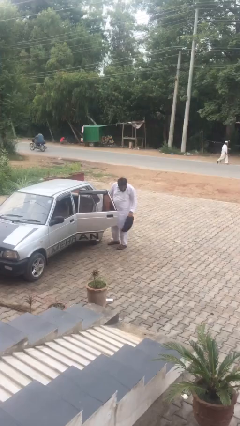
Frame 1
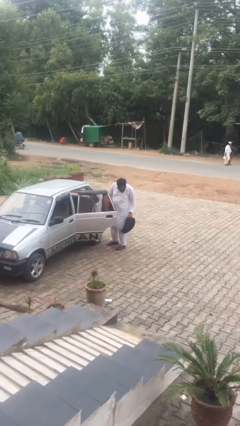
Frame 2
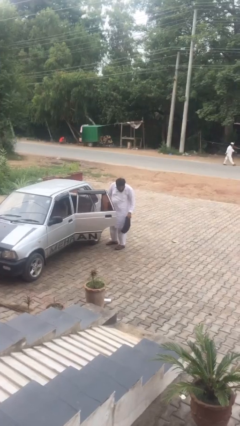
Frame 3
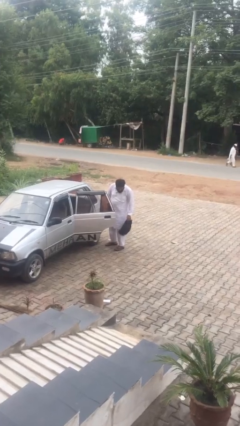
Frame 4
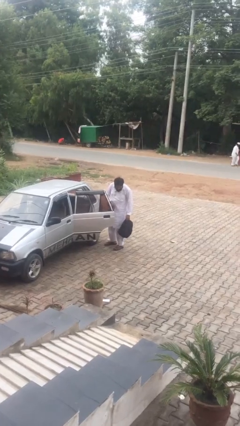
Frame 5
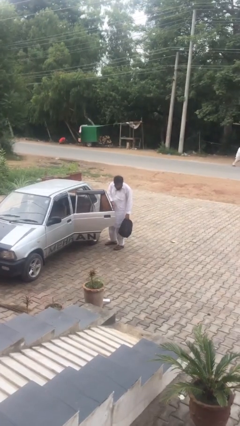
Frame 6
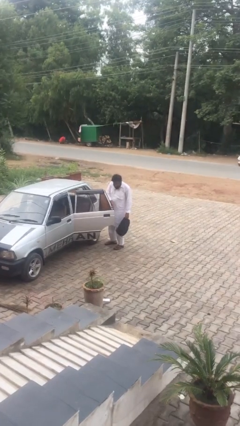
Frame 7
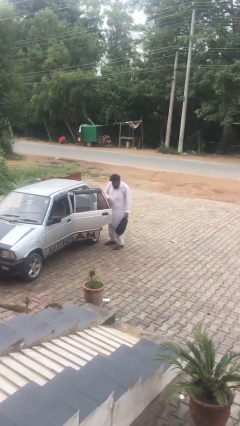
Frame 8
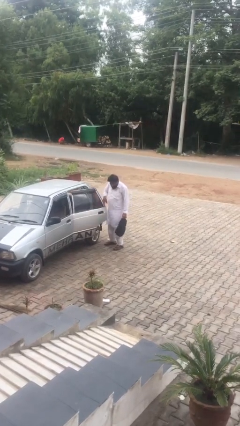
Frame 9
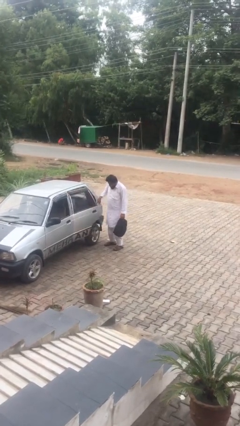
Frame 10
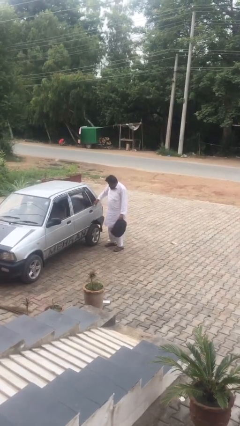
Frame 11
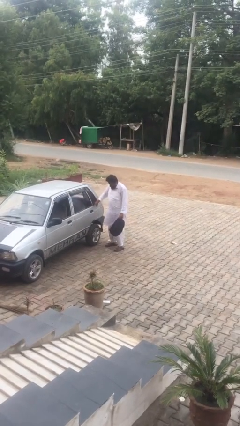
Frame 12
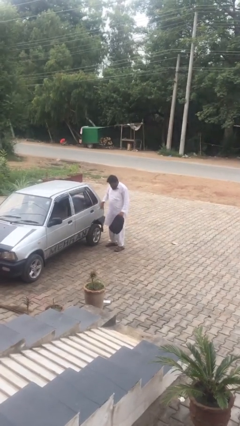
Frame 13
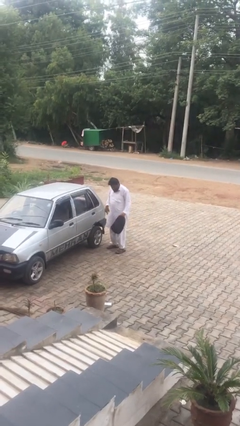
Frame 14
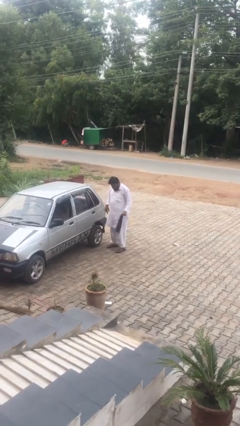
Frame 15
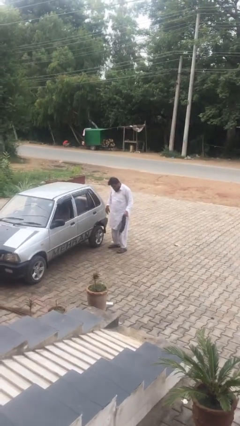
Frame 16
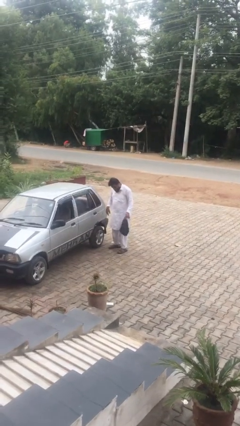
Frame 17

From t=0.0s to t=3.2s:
person closes car door

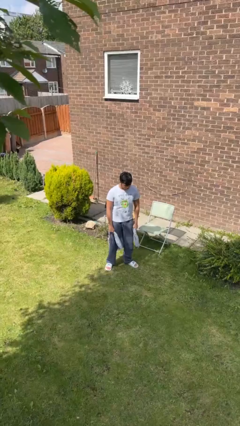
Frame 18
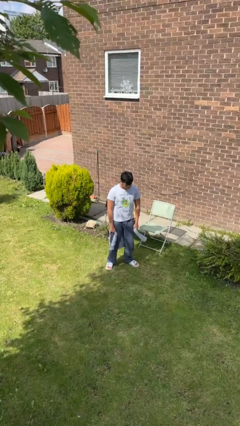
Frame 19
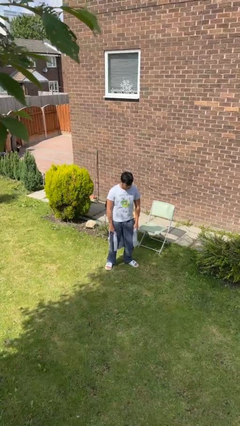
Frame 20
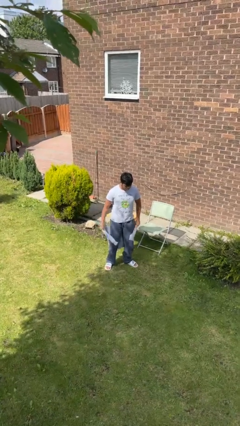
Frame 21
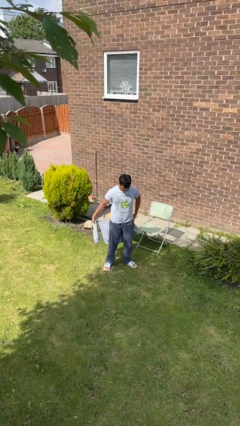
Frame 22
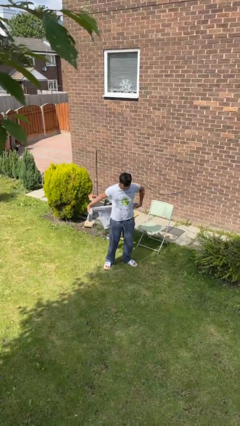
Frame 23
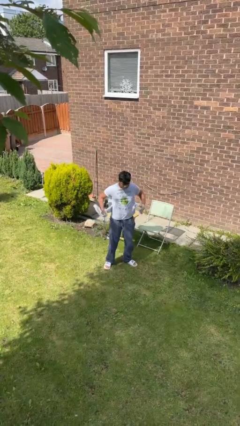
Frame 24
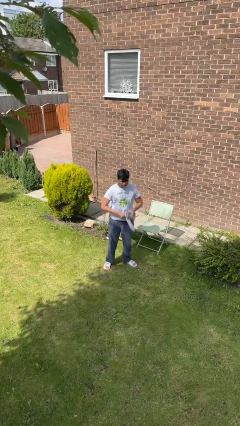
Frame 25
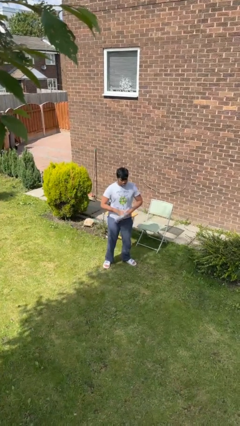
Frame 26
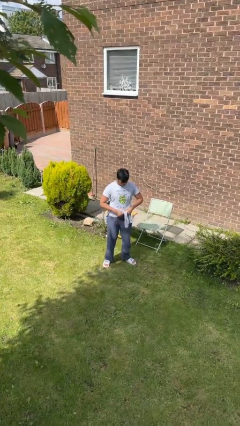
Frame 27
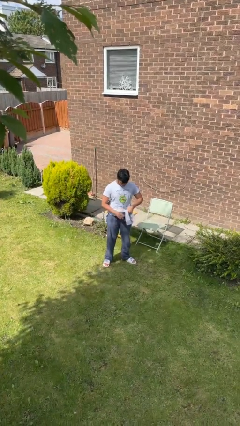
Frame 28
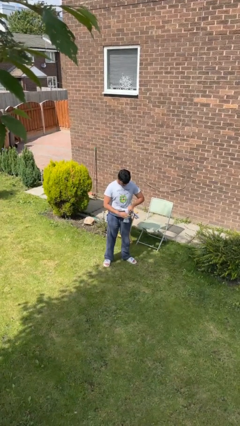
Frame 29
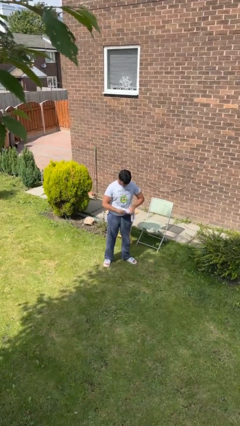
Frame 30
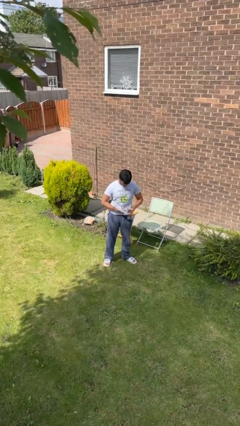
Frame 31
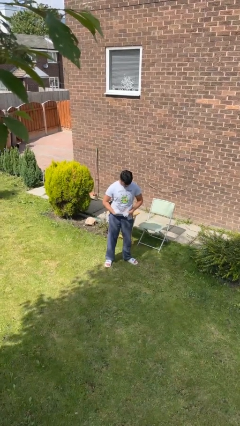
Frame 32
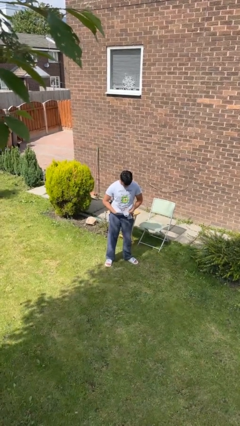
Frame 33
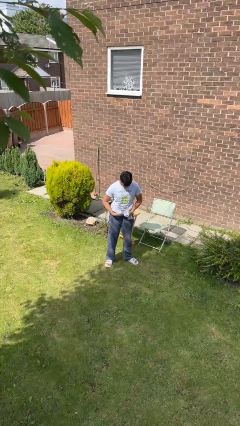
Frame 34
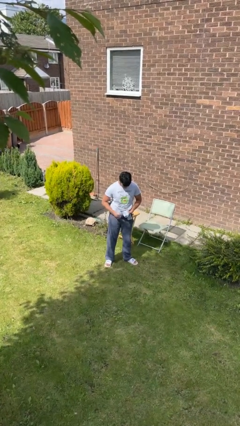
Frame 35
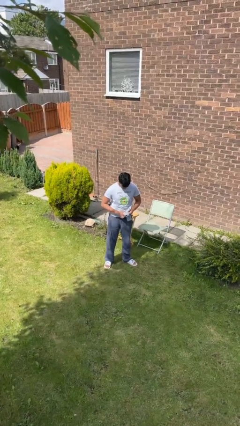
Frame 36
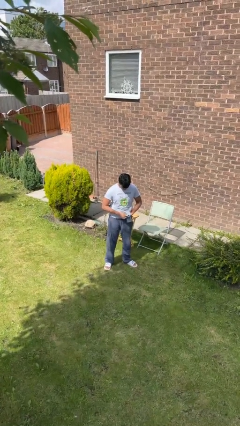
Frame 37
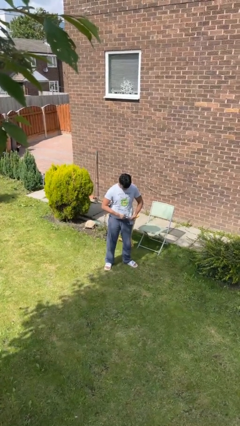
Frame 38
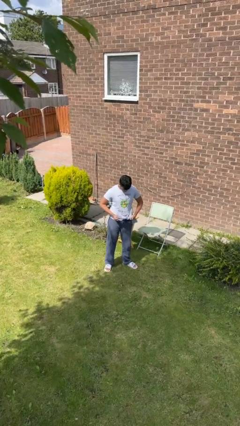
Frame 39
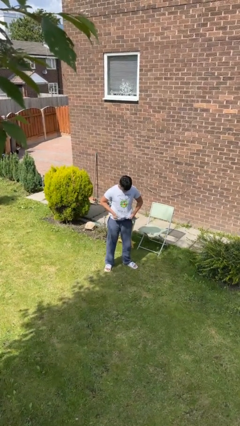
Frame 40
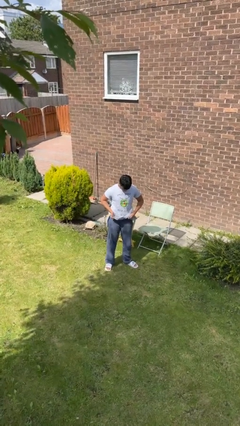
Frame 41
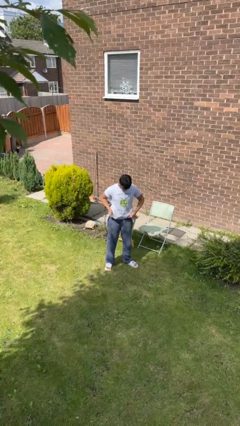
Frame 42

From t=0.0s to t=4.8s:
person ties jacket around waist

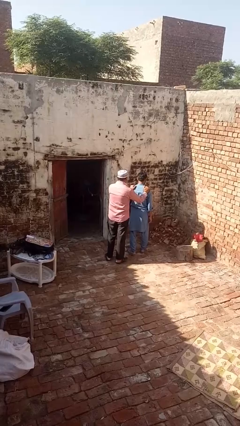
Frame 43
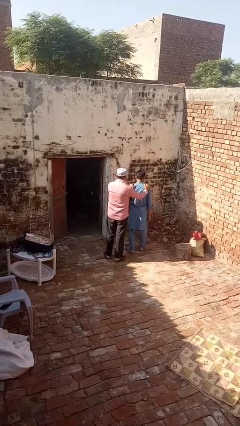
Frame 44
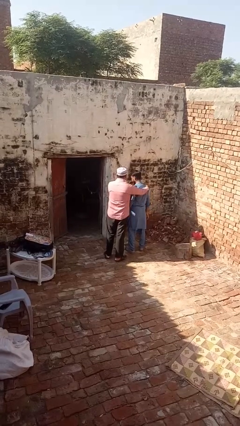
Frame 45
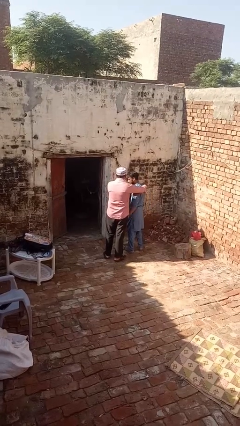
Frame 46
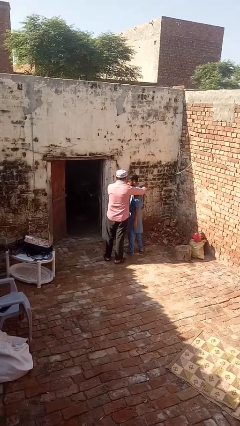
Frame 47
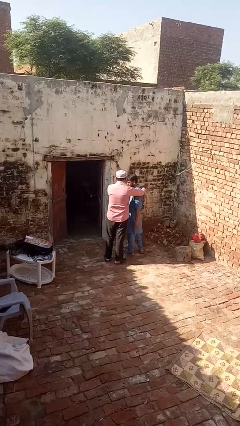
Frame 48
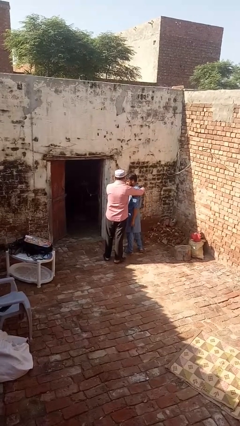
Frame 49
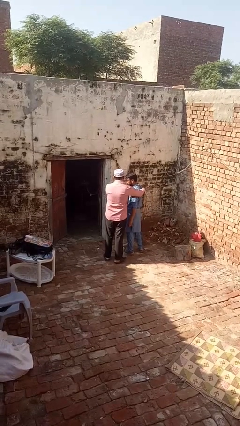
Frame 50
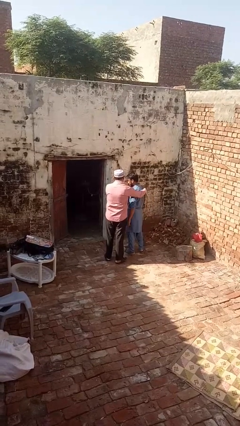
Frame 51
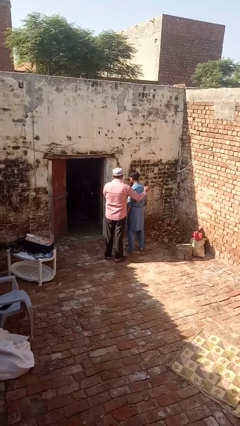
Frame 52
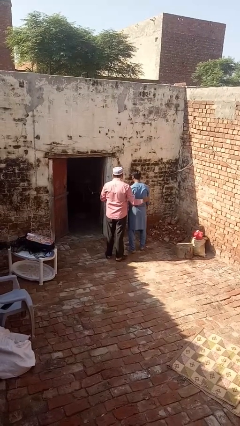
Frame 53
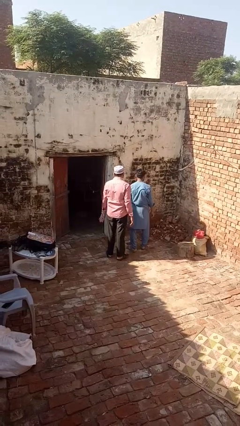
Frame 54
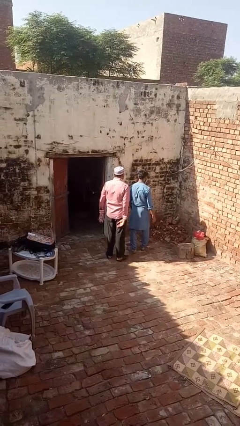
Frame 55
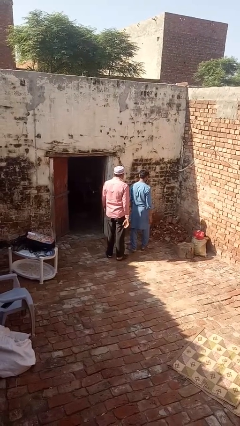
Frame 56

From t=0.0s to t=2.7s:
person spins person around

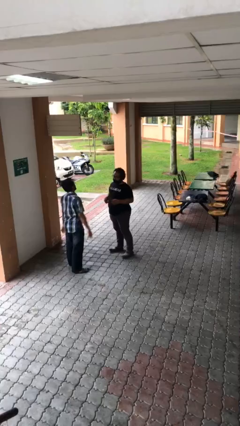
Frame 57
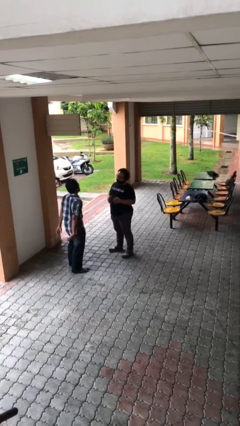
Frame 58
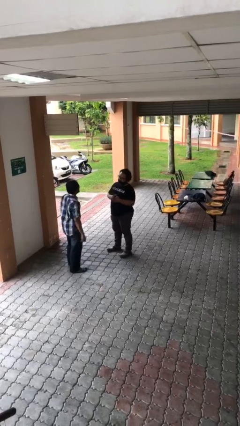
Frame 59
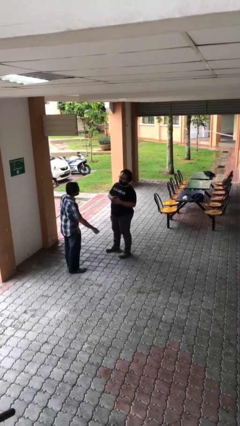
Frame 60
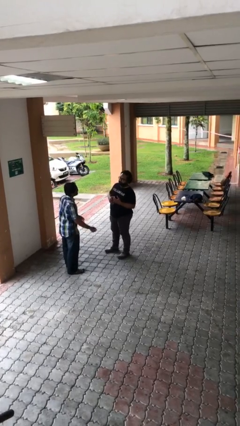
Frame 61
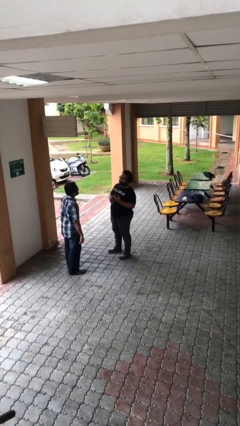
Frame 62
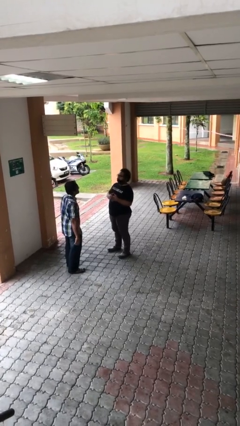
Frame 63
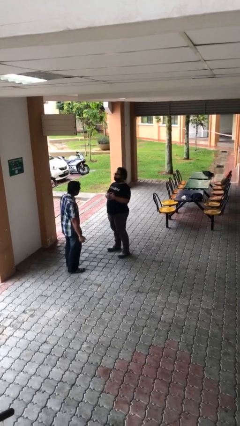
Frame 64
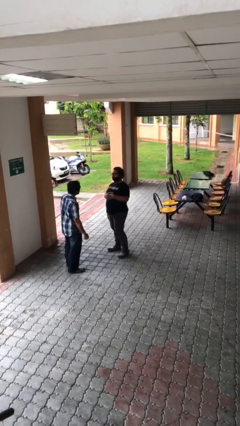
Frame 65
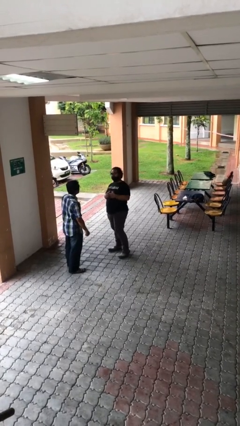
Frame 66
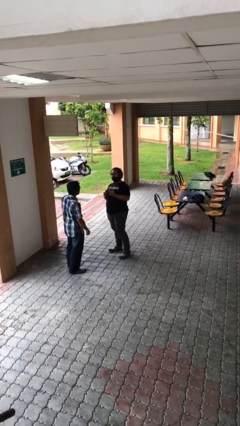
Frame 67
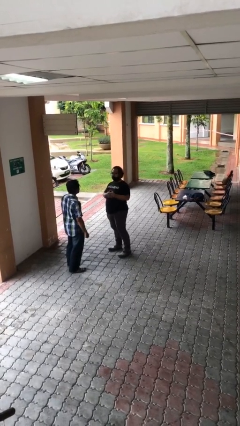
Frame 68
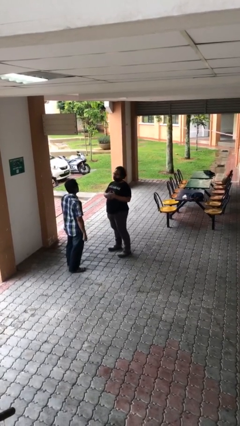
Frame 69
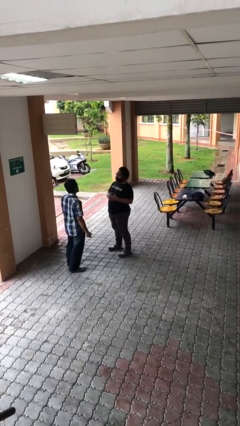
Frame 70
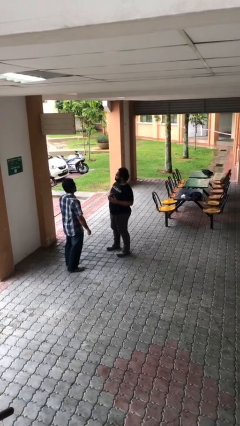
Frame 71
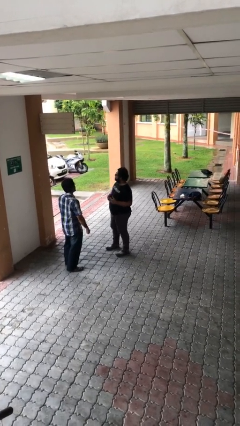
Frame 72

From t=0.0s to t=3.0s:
person talks to person

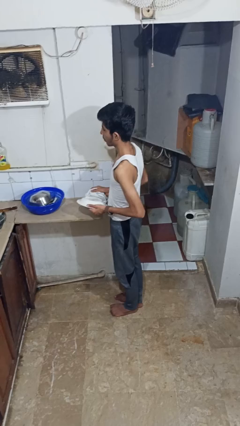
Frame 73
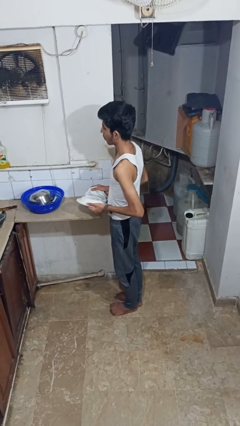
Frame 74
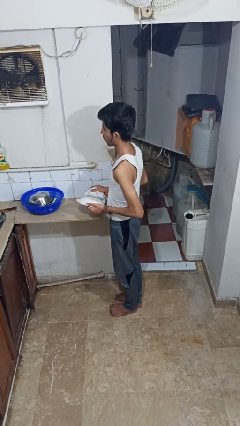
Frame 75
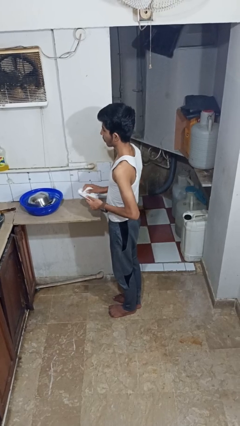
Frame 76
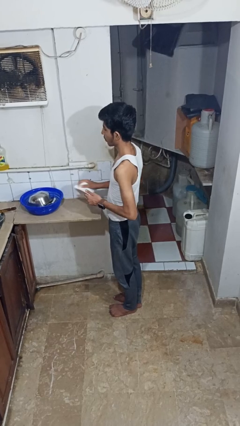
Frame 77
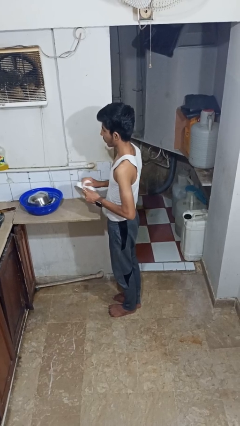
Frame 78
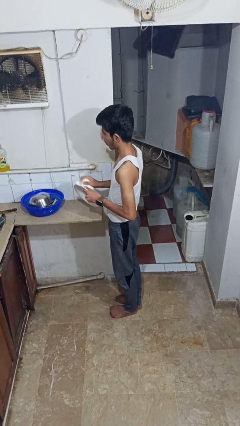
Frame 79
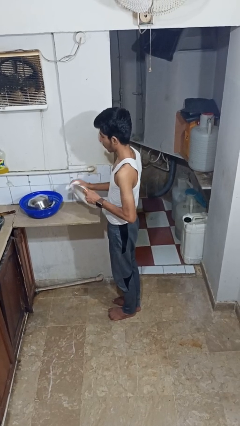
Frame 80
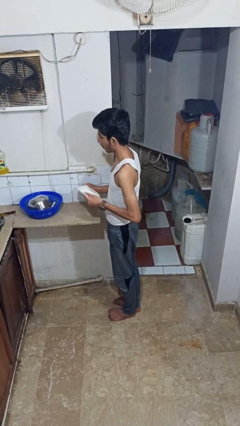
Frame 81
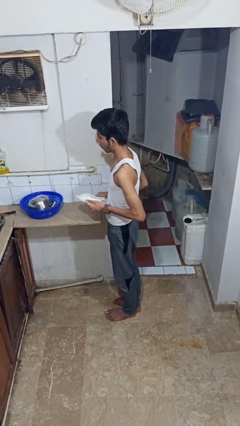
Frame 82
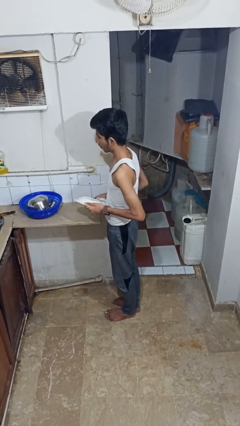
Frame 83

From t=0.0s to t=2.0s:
person dries dish

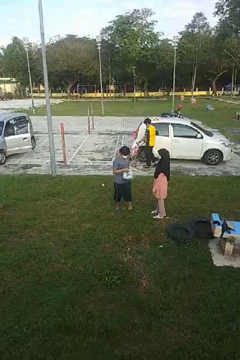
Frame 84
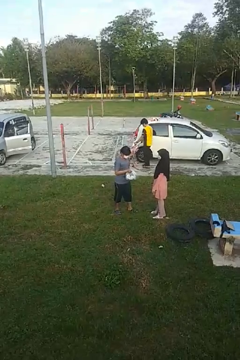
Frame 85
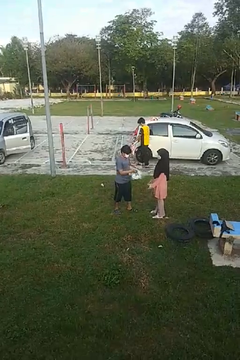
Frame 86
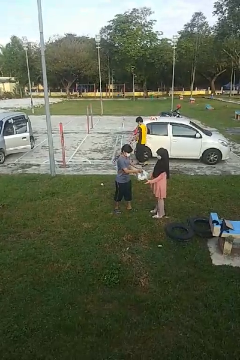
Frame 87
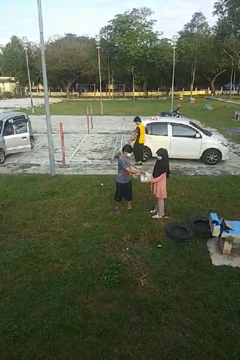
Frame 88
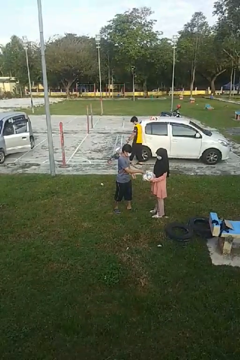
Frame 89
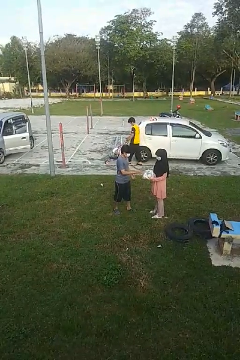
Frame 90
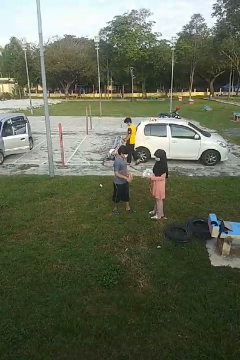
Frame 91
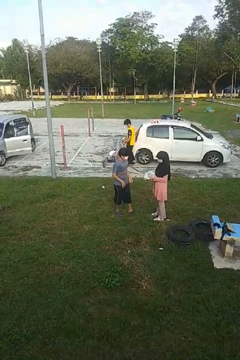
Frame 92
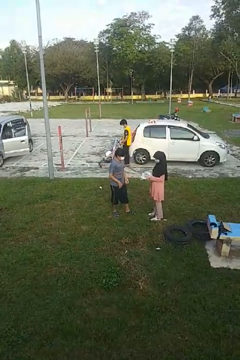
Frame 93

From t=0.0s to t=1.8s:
person transfers object to person
